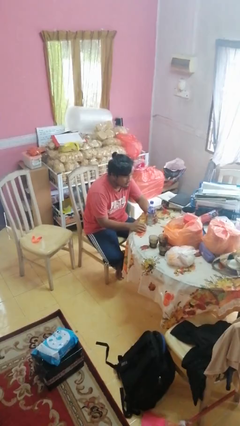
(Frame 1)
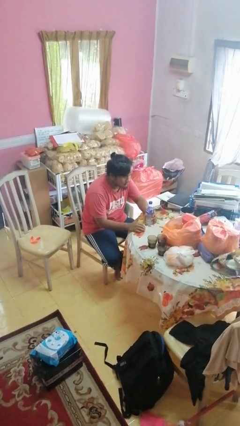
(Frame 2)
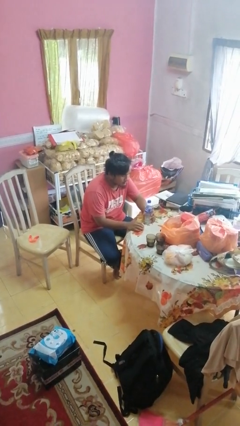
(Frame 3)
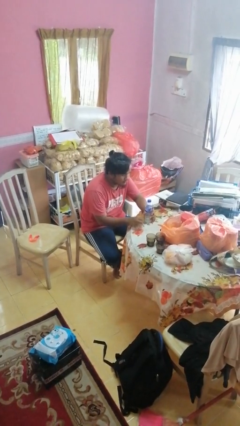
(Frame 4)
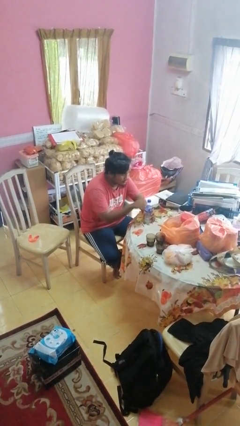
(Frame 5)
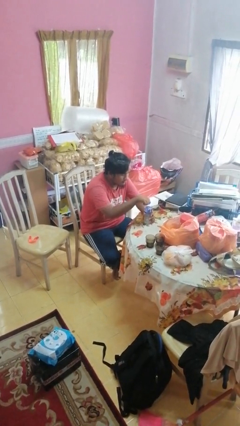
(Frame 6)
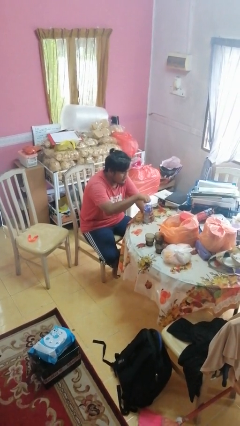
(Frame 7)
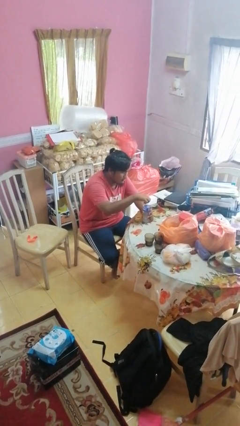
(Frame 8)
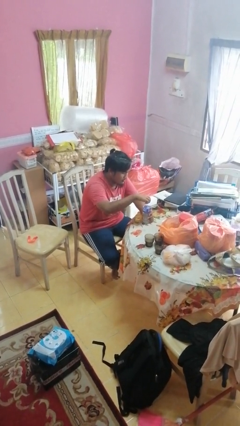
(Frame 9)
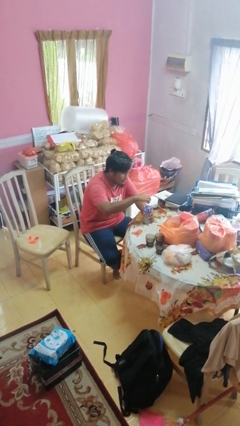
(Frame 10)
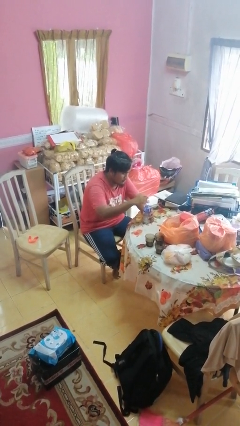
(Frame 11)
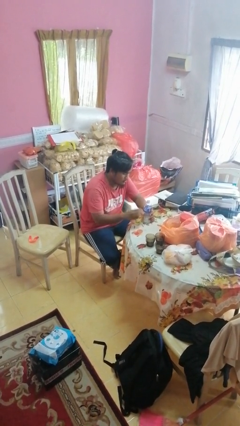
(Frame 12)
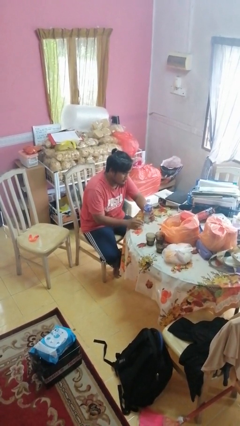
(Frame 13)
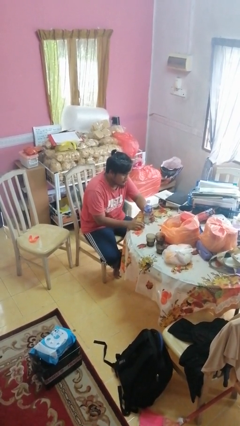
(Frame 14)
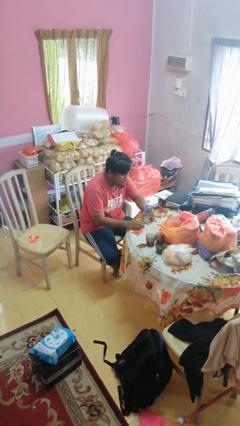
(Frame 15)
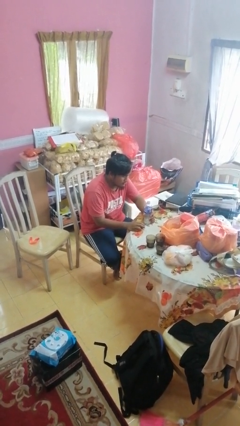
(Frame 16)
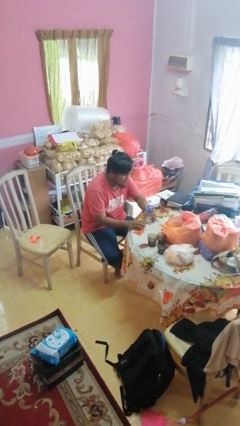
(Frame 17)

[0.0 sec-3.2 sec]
person unscrews lid from bottle

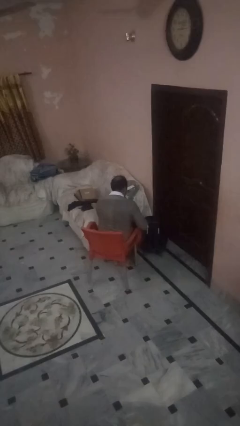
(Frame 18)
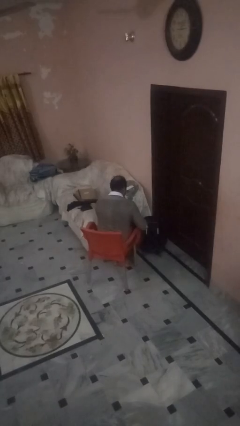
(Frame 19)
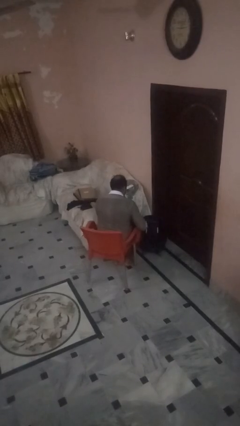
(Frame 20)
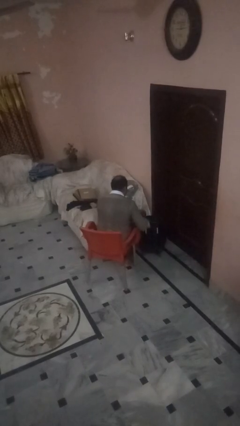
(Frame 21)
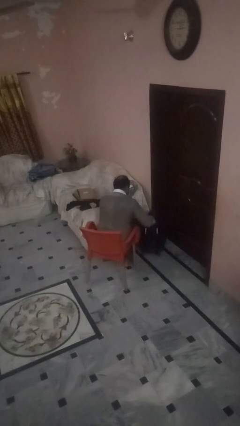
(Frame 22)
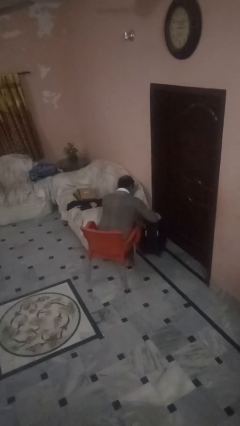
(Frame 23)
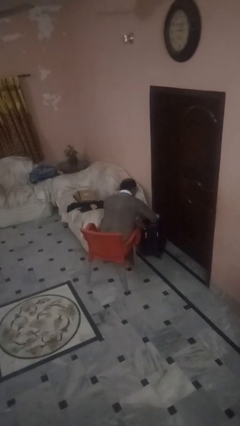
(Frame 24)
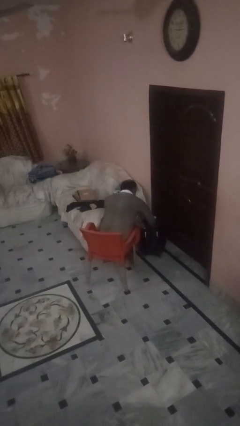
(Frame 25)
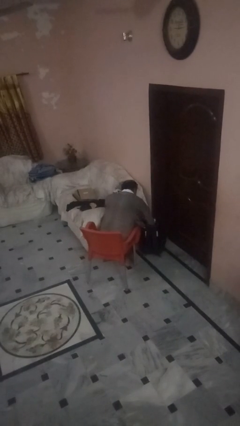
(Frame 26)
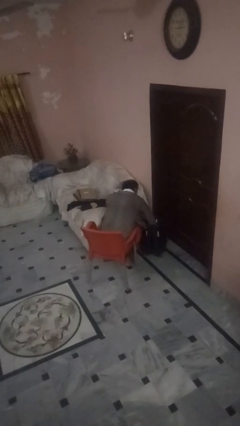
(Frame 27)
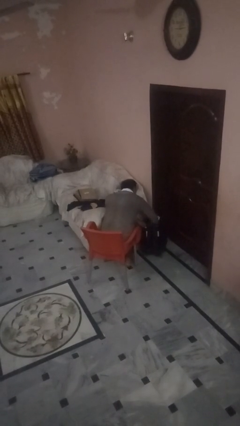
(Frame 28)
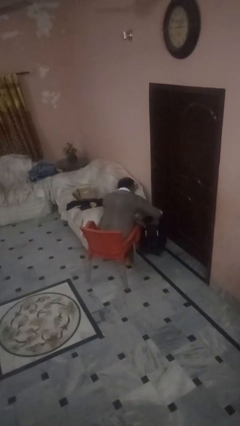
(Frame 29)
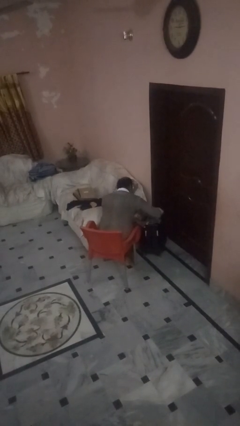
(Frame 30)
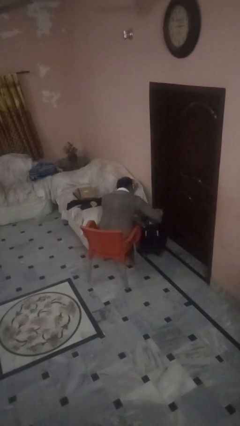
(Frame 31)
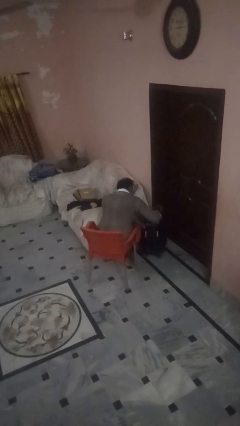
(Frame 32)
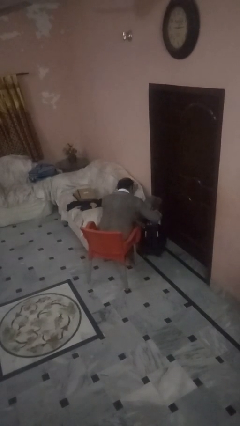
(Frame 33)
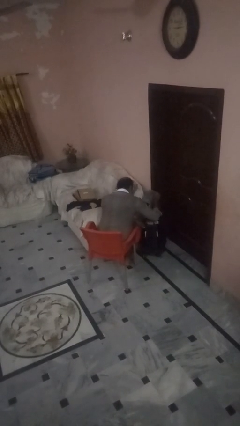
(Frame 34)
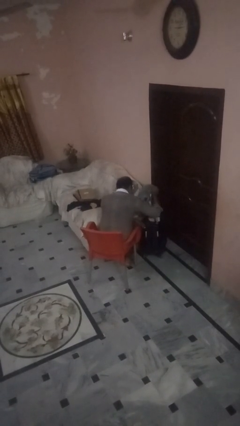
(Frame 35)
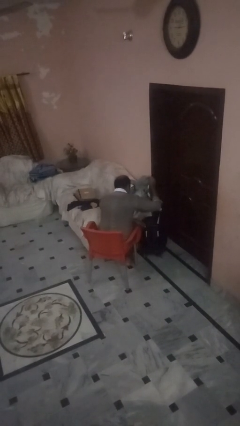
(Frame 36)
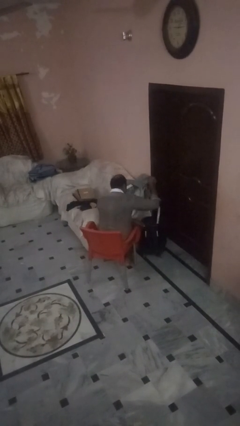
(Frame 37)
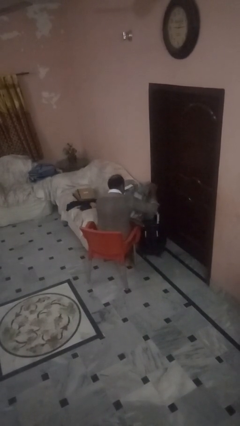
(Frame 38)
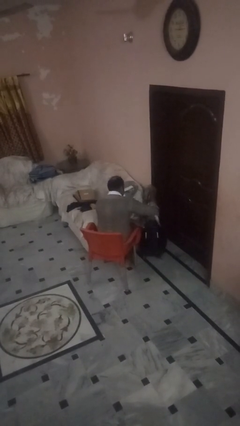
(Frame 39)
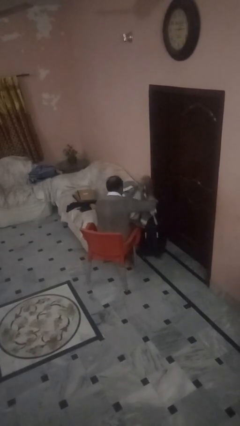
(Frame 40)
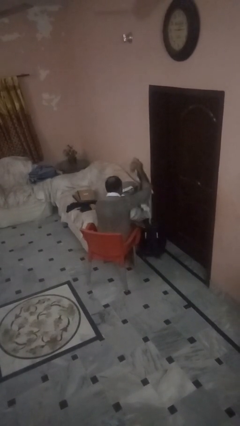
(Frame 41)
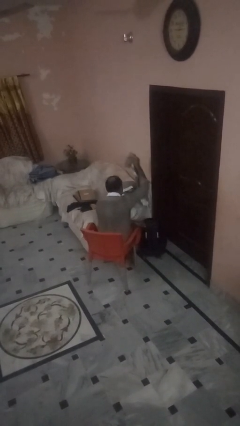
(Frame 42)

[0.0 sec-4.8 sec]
person unloads clothes from suitcase

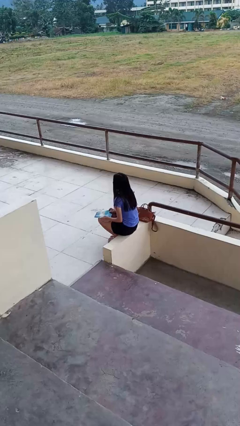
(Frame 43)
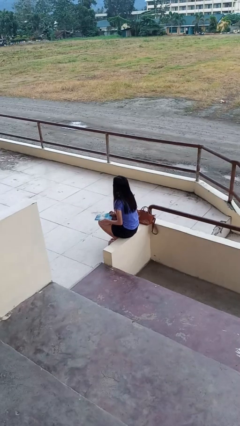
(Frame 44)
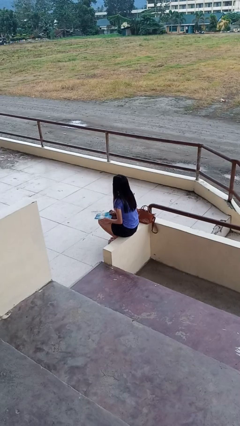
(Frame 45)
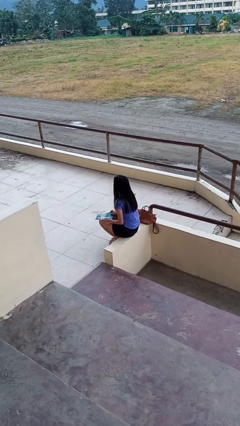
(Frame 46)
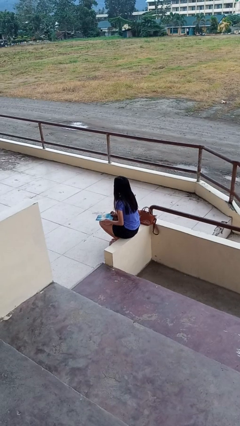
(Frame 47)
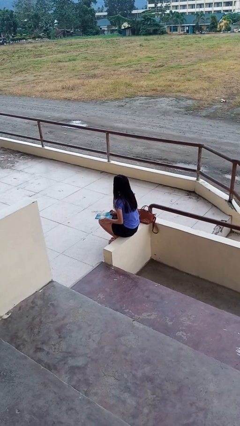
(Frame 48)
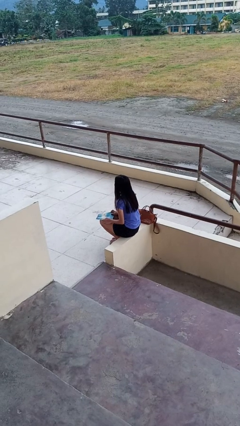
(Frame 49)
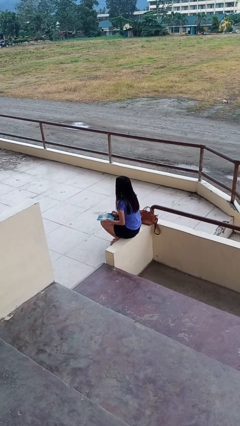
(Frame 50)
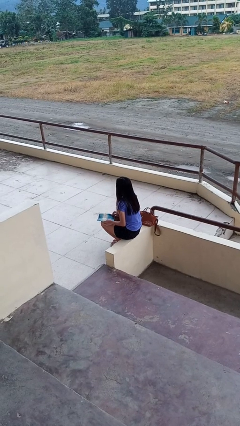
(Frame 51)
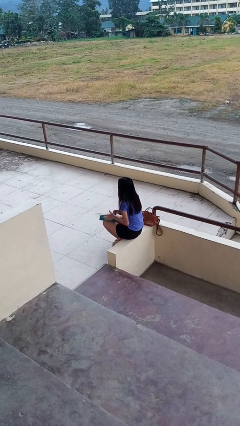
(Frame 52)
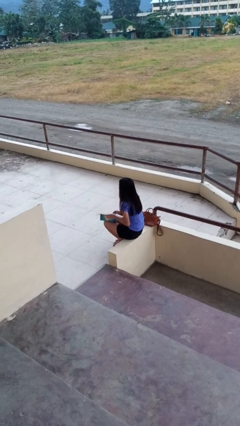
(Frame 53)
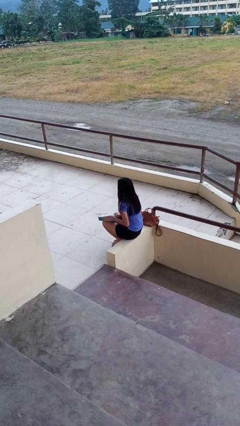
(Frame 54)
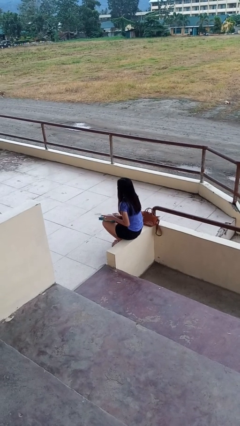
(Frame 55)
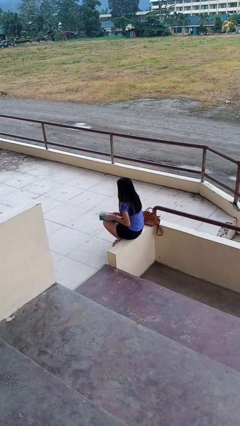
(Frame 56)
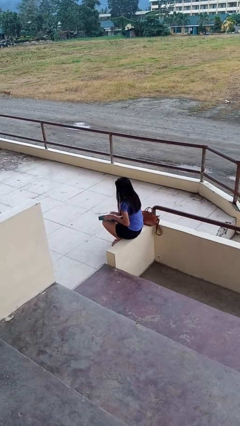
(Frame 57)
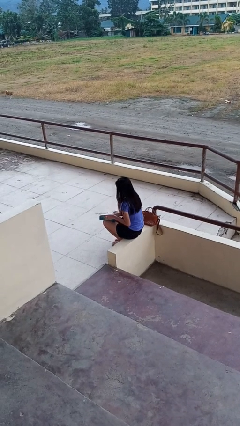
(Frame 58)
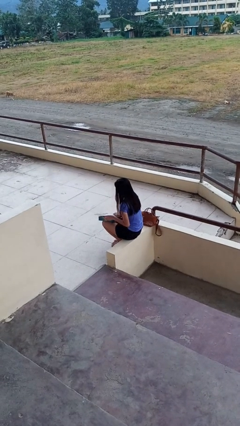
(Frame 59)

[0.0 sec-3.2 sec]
person reads magazine

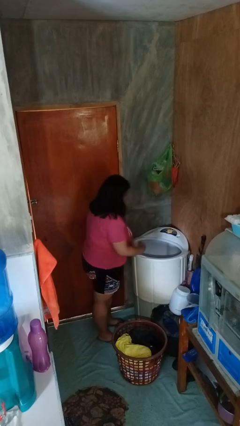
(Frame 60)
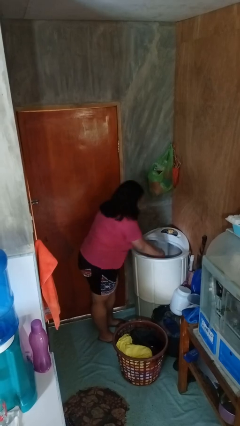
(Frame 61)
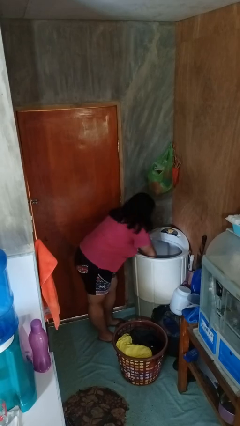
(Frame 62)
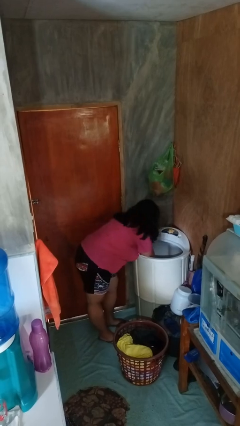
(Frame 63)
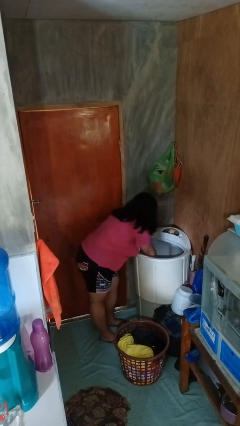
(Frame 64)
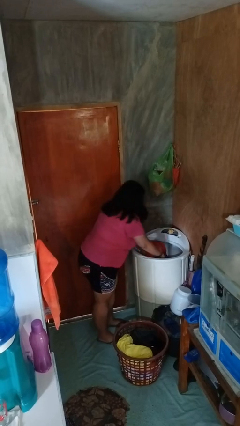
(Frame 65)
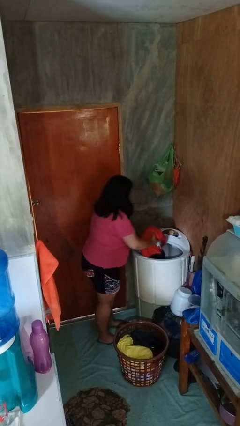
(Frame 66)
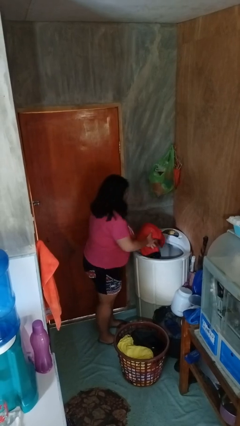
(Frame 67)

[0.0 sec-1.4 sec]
person unloads dryer

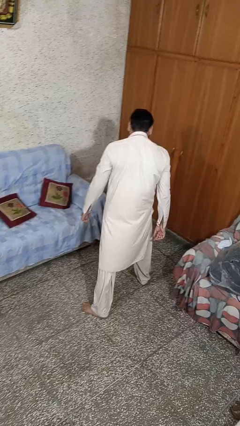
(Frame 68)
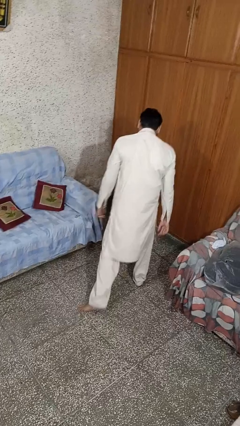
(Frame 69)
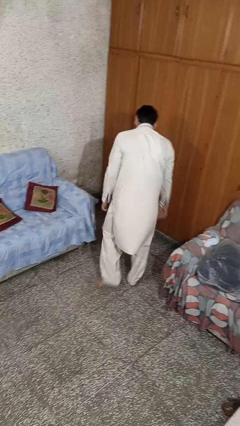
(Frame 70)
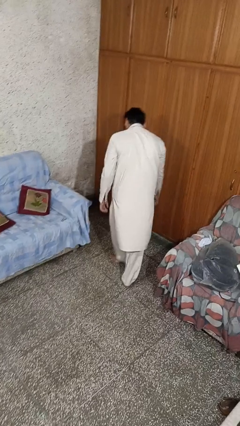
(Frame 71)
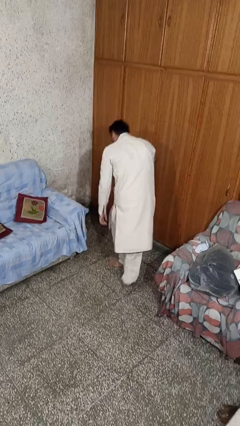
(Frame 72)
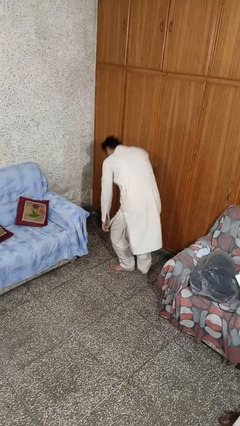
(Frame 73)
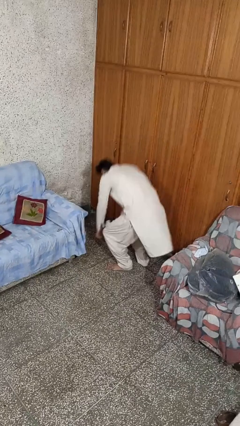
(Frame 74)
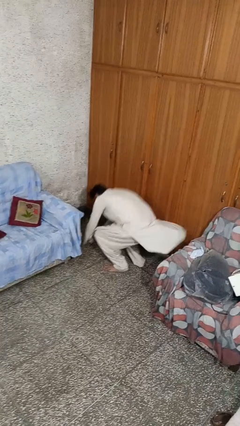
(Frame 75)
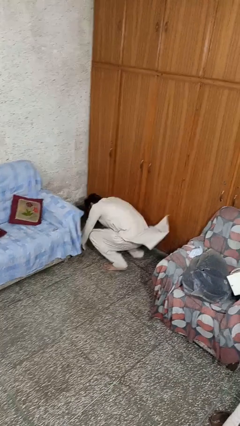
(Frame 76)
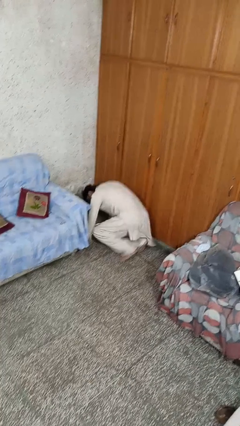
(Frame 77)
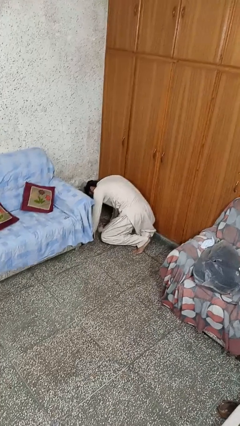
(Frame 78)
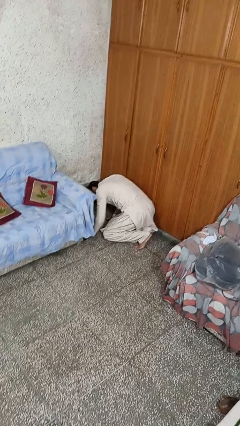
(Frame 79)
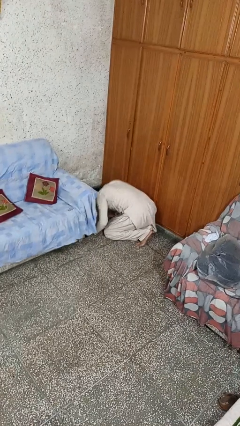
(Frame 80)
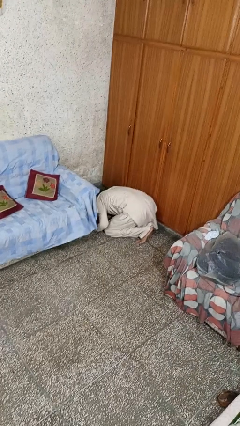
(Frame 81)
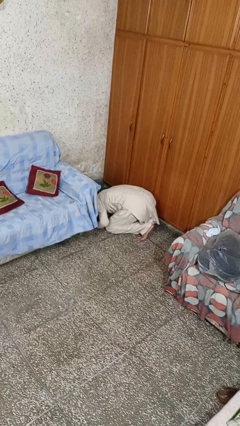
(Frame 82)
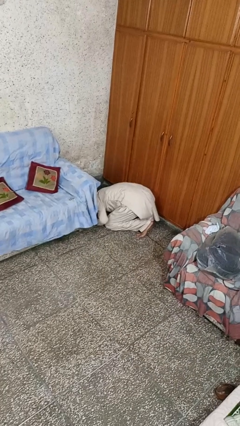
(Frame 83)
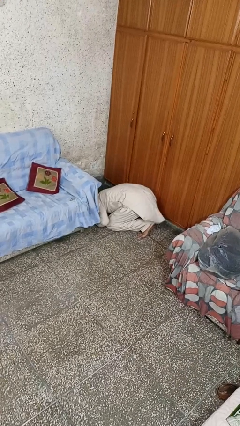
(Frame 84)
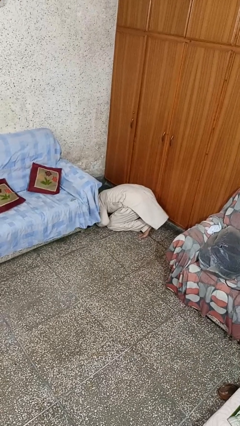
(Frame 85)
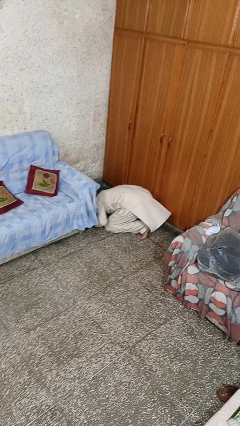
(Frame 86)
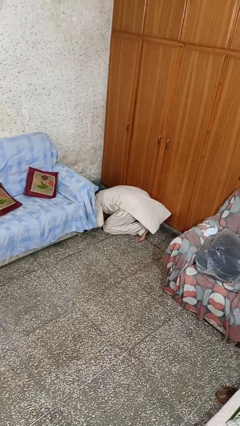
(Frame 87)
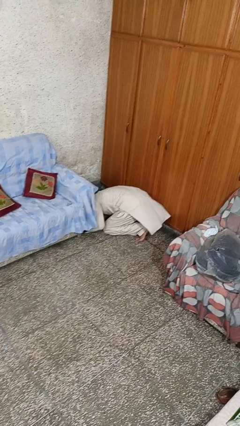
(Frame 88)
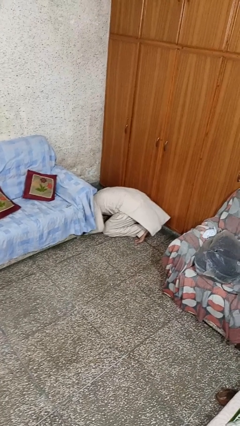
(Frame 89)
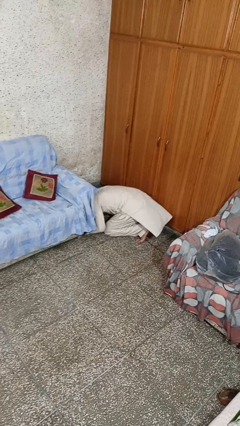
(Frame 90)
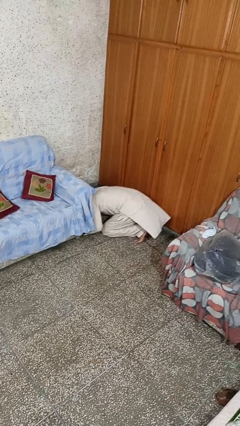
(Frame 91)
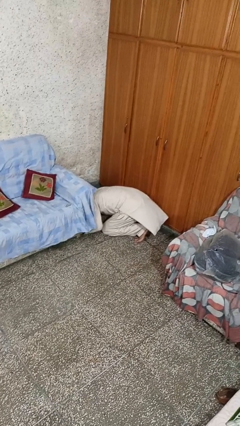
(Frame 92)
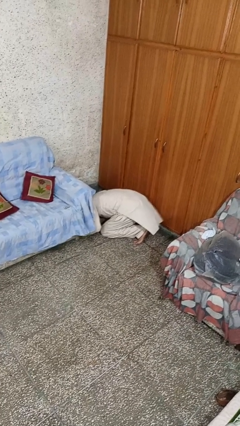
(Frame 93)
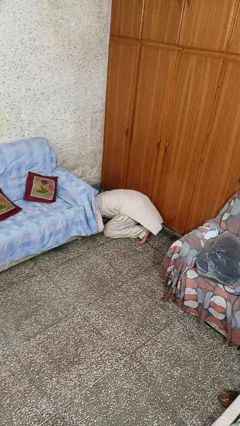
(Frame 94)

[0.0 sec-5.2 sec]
person searches under couch
